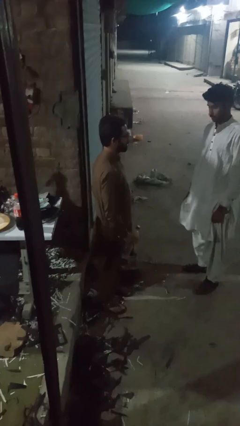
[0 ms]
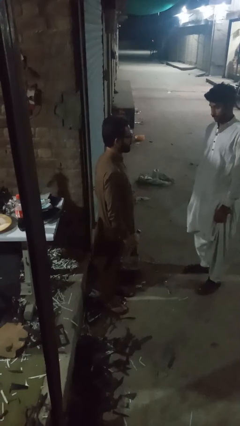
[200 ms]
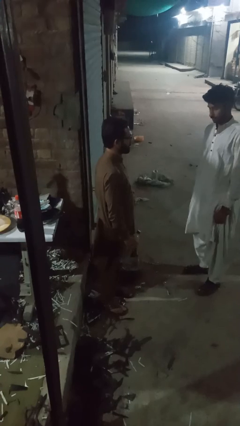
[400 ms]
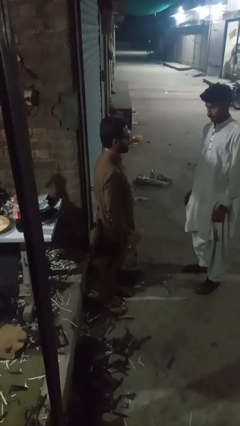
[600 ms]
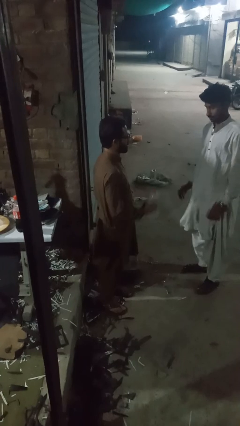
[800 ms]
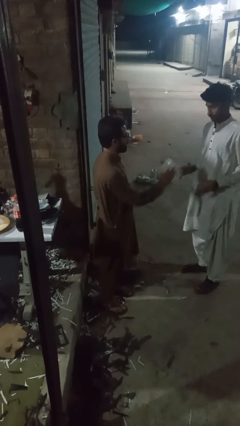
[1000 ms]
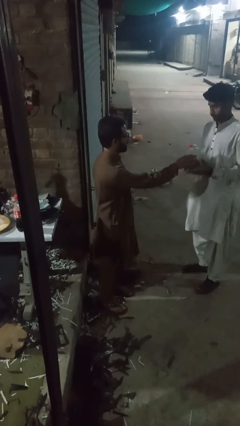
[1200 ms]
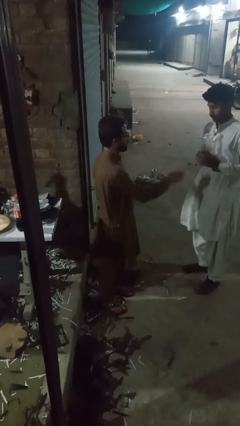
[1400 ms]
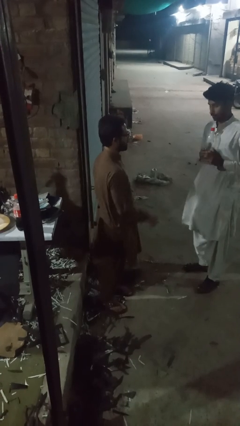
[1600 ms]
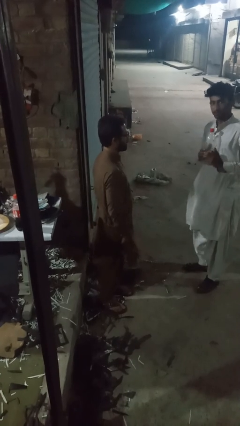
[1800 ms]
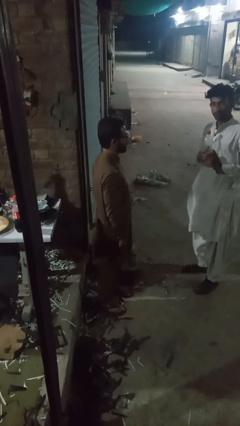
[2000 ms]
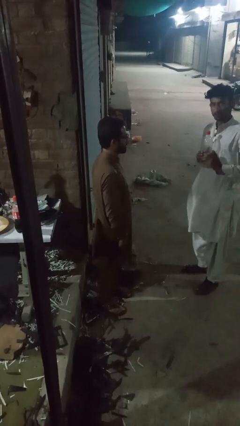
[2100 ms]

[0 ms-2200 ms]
person throws object to person

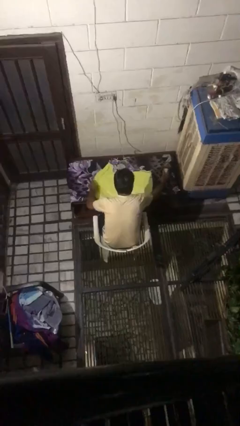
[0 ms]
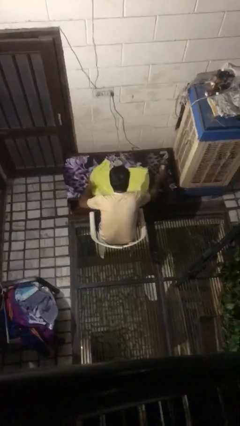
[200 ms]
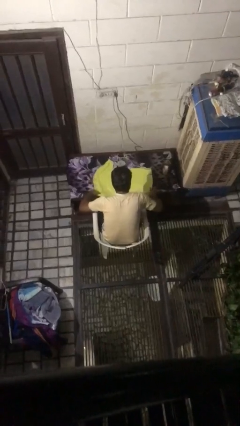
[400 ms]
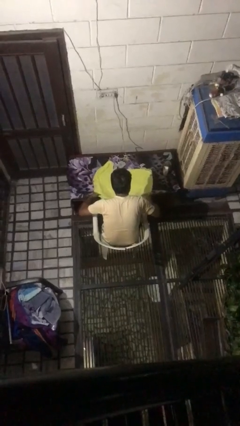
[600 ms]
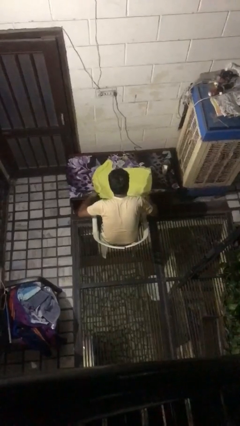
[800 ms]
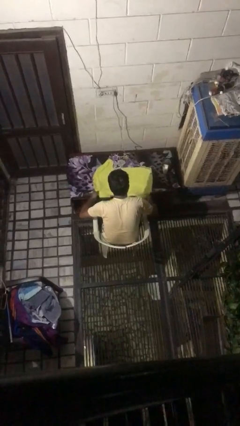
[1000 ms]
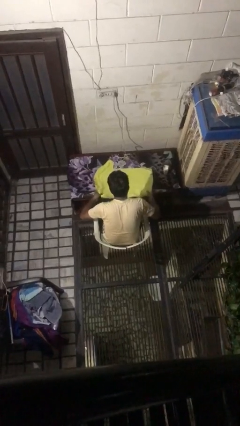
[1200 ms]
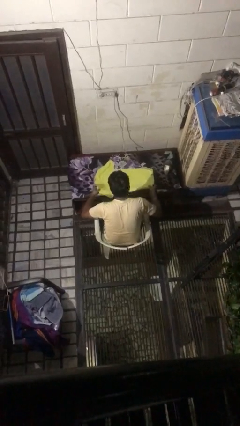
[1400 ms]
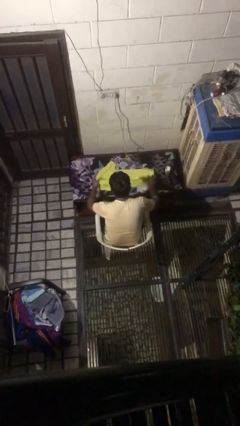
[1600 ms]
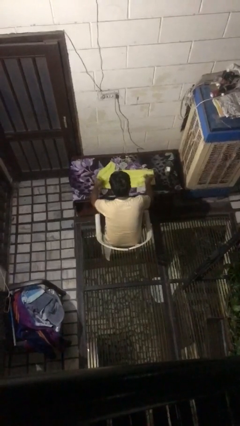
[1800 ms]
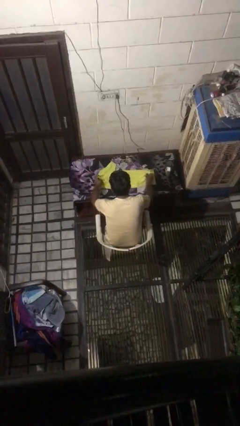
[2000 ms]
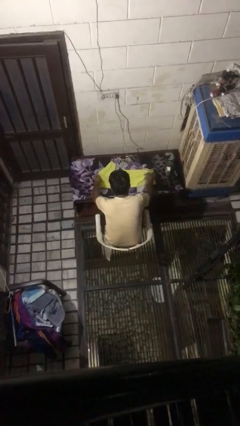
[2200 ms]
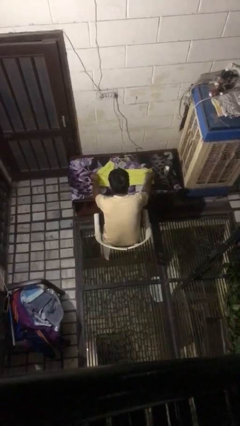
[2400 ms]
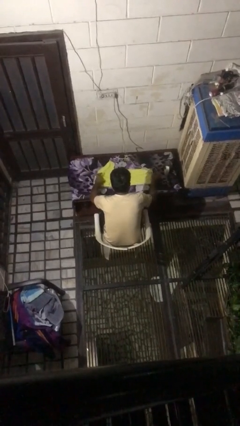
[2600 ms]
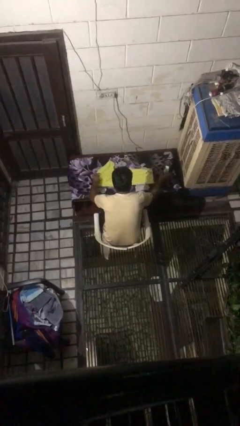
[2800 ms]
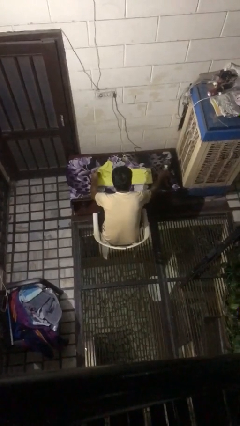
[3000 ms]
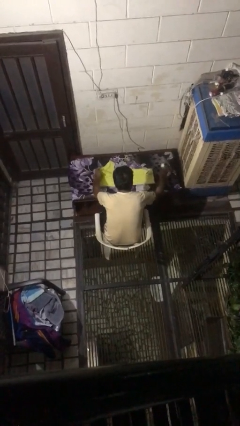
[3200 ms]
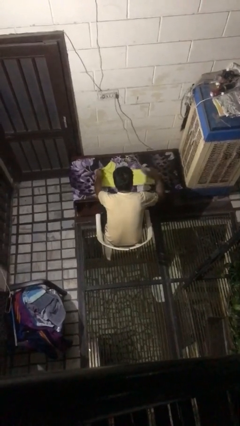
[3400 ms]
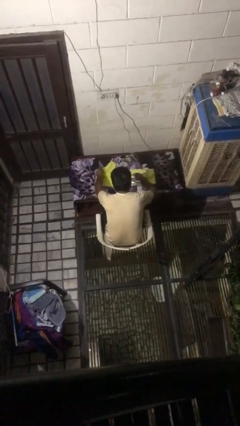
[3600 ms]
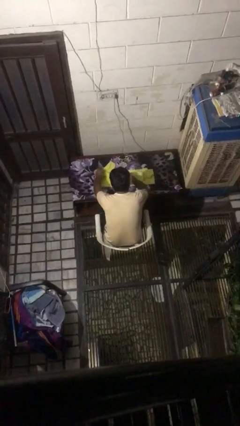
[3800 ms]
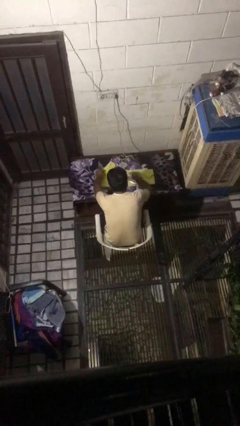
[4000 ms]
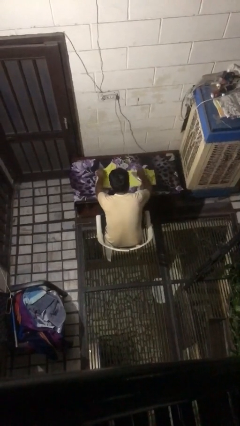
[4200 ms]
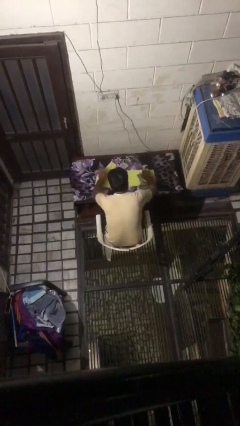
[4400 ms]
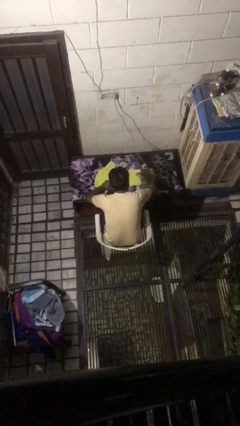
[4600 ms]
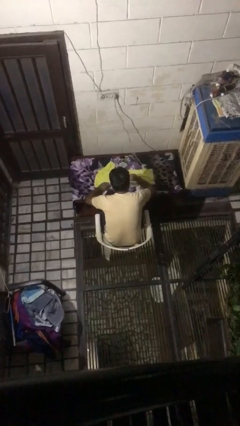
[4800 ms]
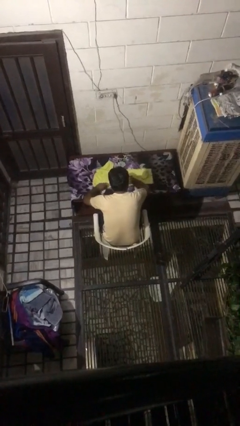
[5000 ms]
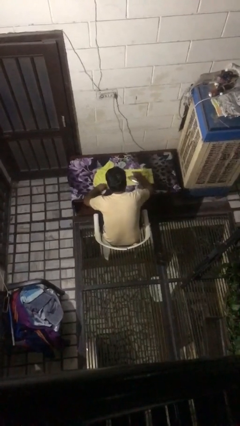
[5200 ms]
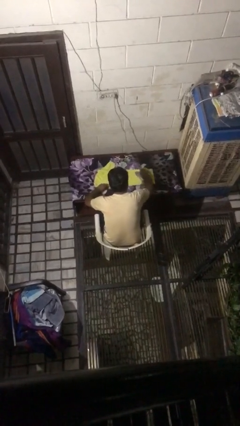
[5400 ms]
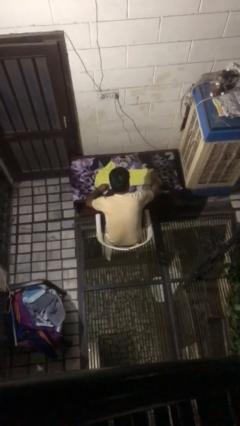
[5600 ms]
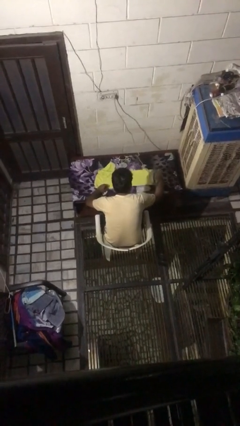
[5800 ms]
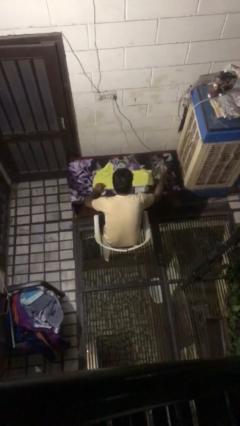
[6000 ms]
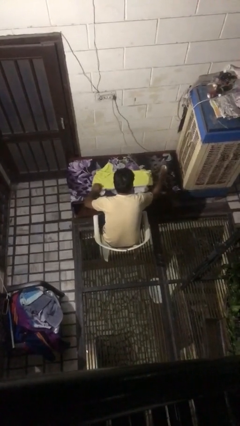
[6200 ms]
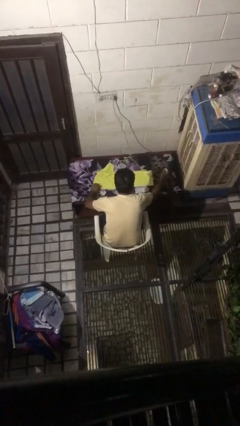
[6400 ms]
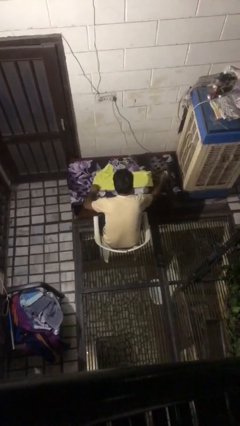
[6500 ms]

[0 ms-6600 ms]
person irons clothes

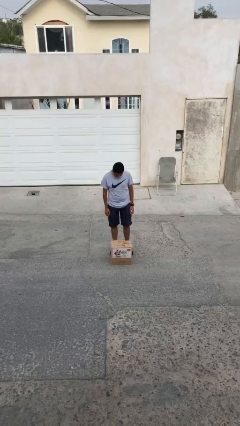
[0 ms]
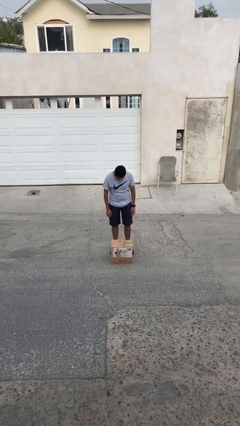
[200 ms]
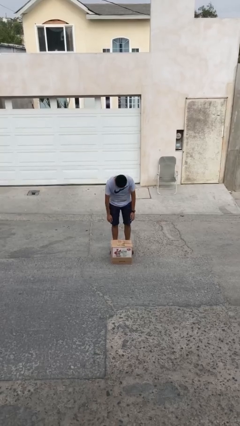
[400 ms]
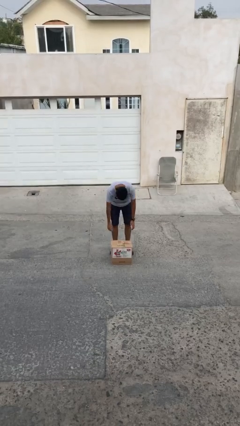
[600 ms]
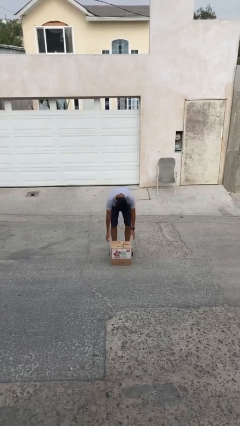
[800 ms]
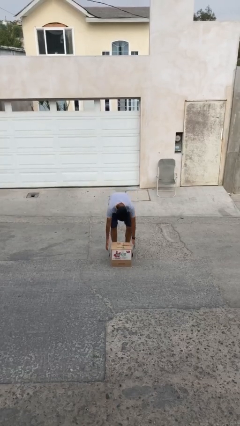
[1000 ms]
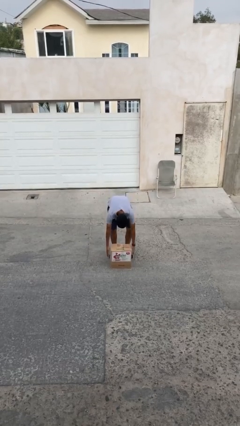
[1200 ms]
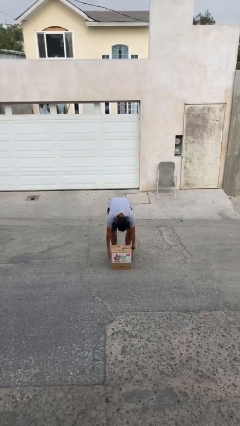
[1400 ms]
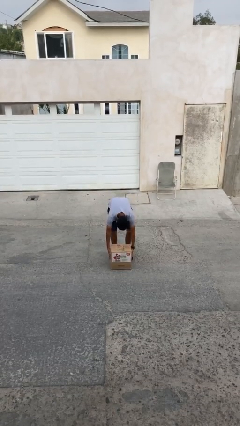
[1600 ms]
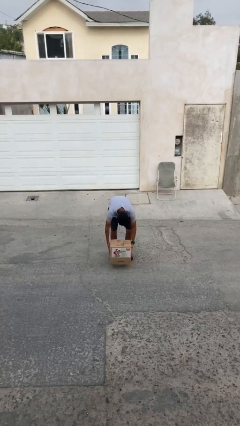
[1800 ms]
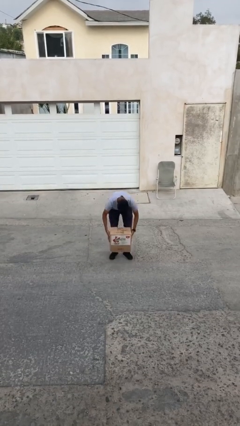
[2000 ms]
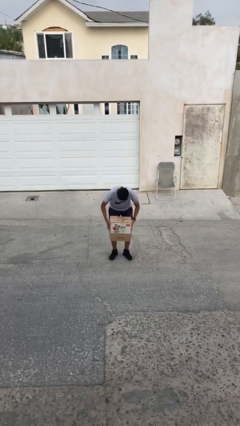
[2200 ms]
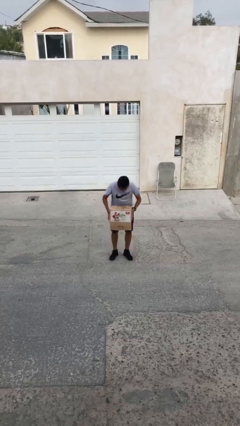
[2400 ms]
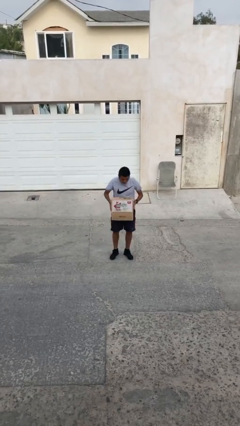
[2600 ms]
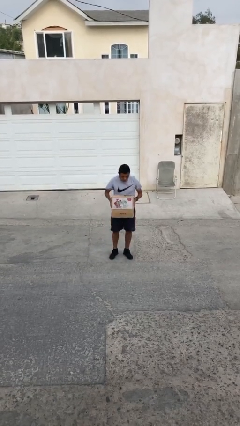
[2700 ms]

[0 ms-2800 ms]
person picks up object from floor

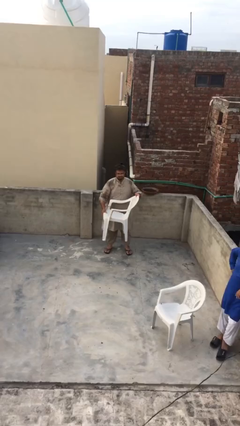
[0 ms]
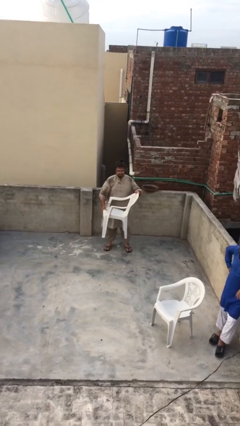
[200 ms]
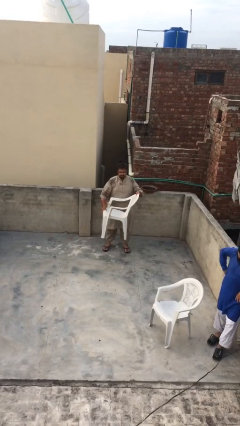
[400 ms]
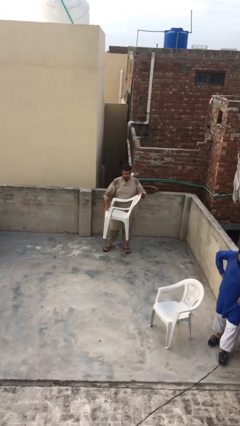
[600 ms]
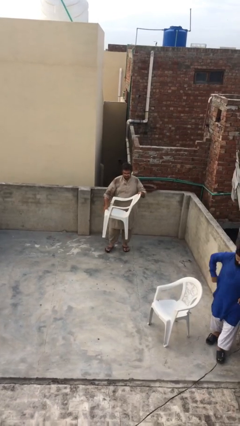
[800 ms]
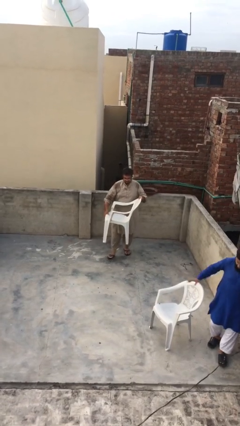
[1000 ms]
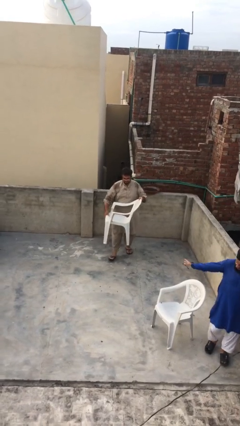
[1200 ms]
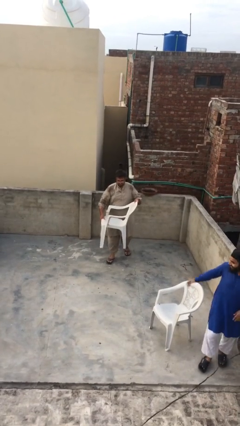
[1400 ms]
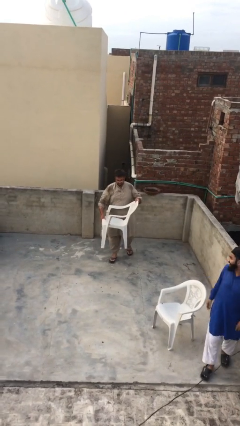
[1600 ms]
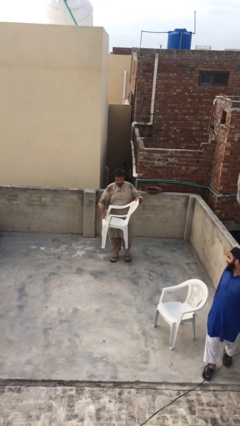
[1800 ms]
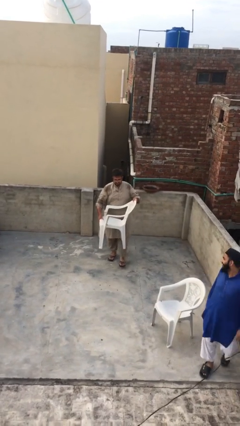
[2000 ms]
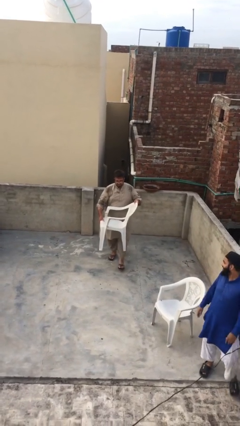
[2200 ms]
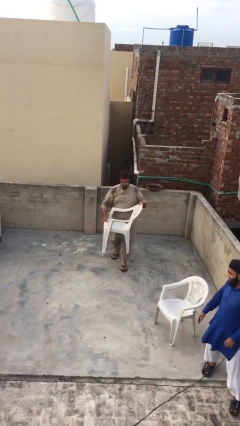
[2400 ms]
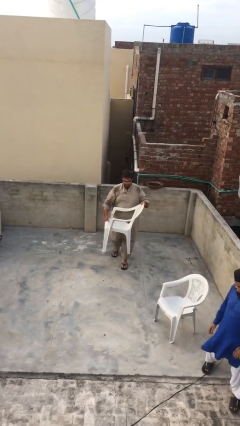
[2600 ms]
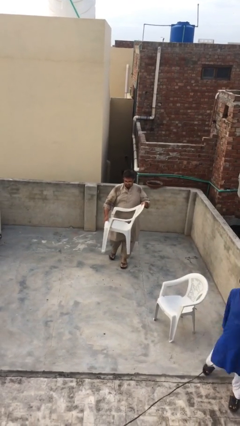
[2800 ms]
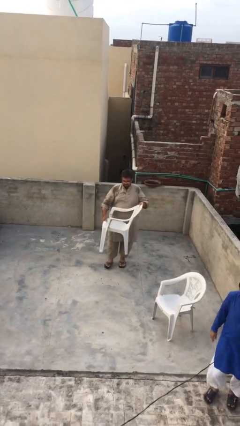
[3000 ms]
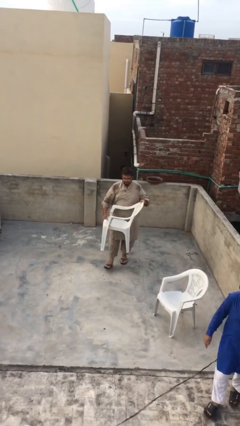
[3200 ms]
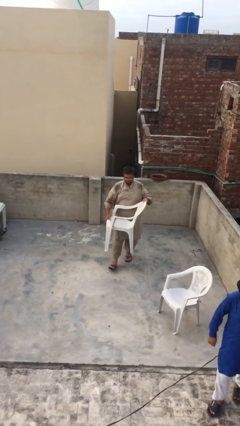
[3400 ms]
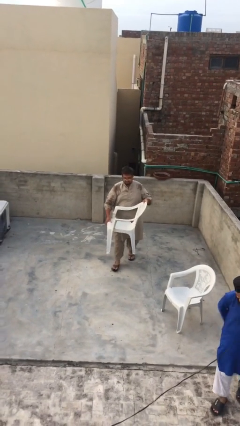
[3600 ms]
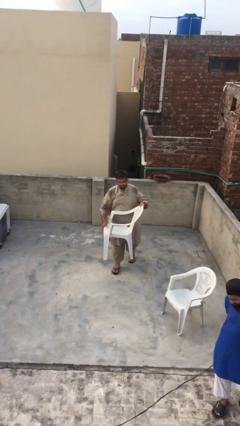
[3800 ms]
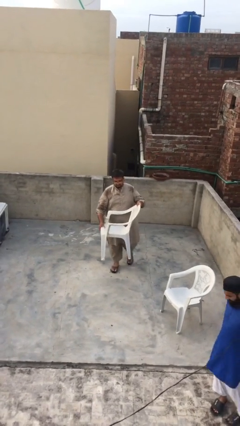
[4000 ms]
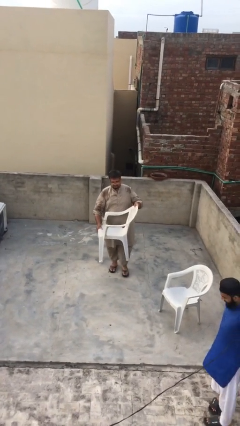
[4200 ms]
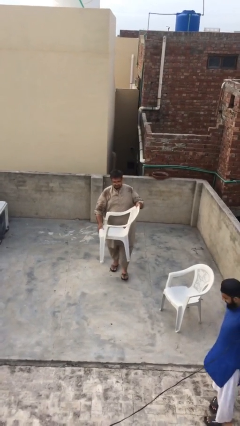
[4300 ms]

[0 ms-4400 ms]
person carries heavy object

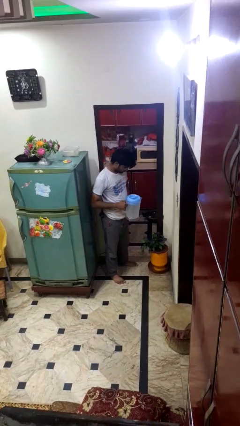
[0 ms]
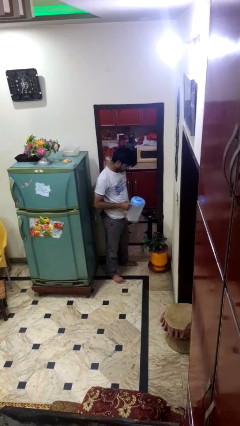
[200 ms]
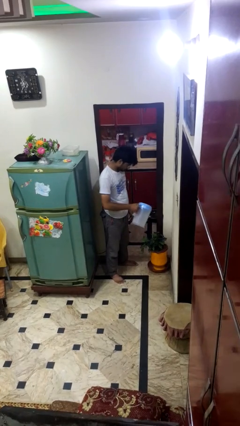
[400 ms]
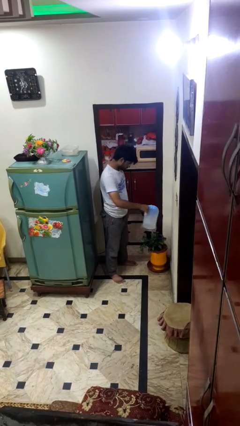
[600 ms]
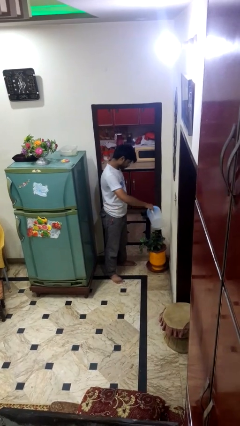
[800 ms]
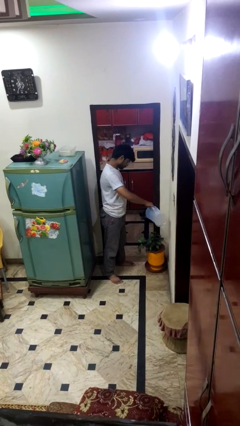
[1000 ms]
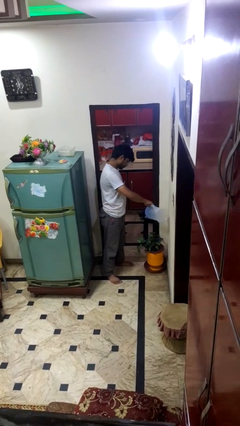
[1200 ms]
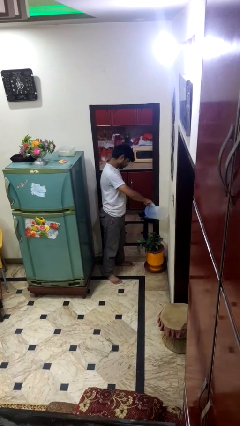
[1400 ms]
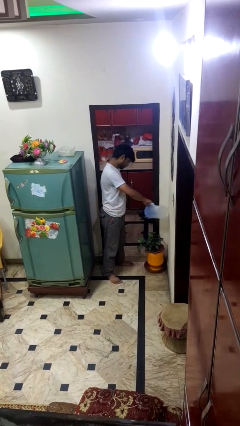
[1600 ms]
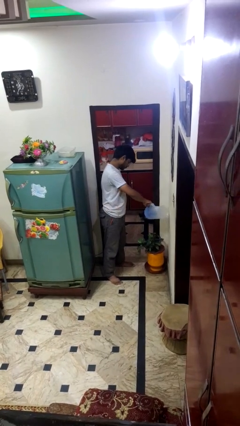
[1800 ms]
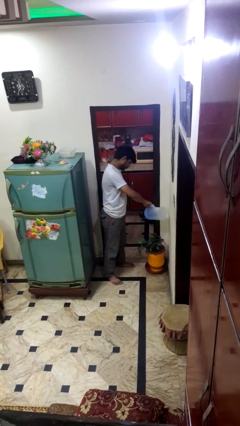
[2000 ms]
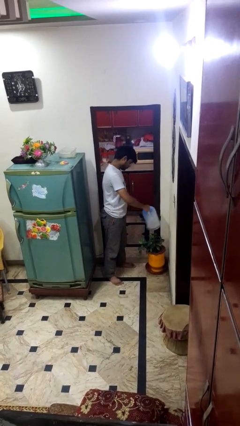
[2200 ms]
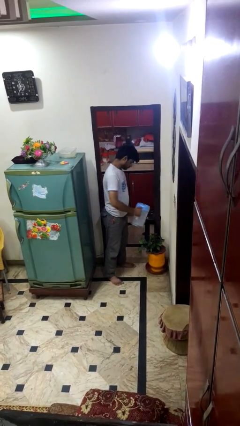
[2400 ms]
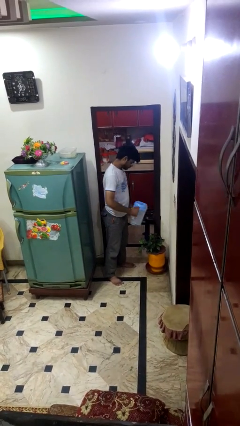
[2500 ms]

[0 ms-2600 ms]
person waters houseplant
